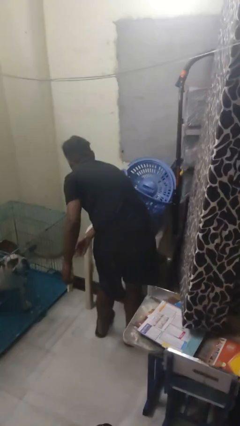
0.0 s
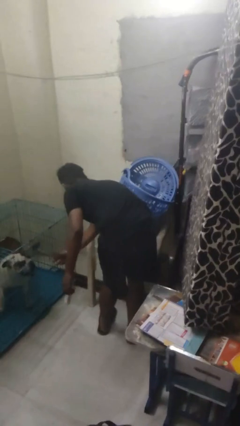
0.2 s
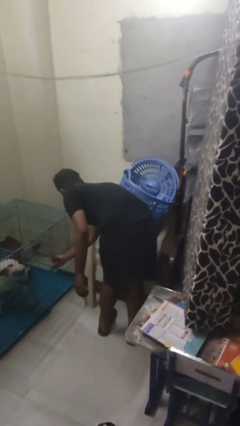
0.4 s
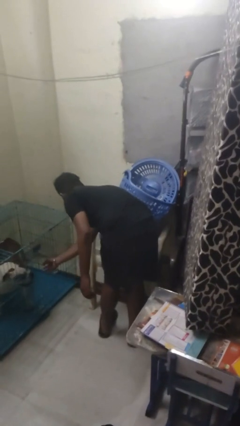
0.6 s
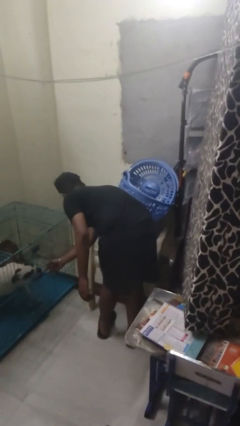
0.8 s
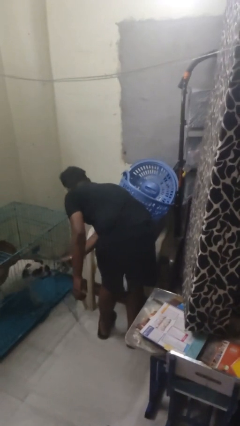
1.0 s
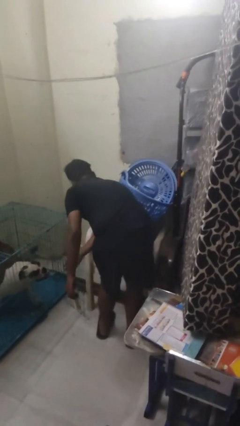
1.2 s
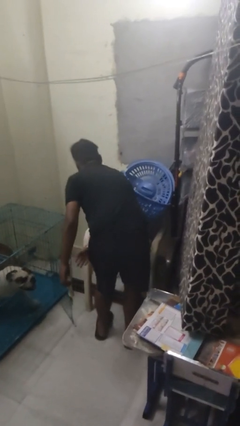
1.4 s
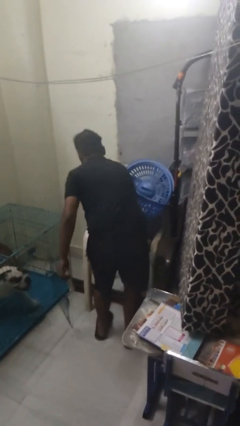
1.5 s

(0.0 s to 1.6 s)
person uncrates dog

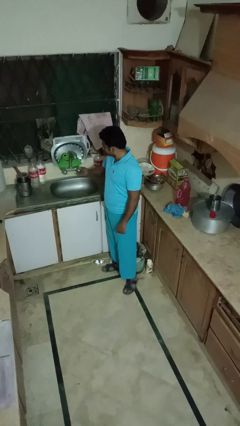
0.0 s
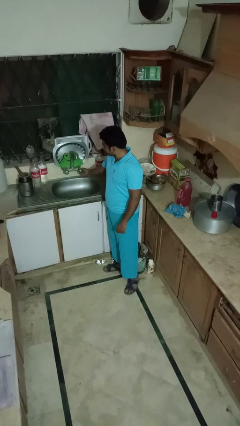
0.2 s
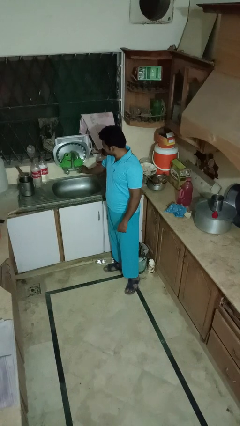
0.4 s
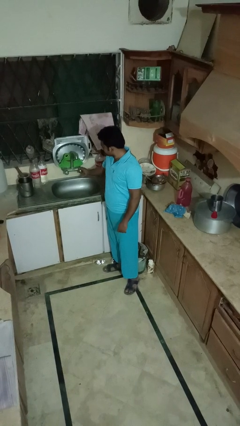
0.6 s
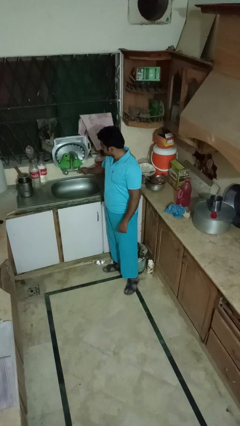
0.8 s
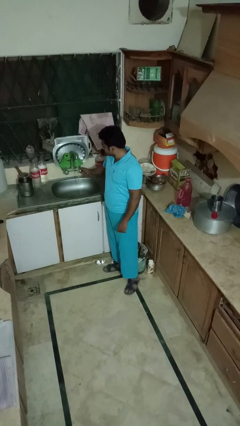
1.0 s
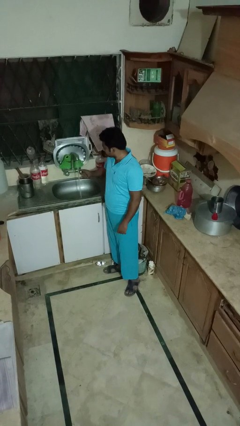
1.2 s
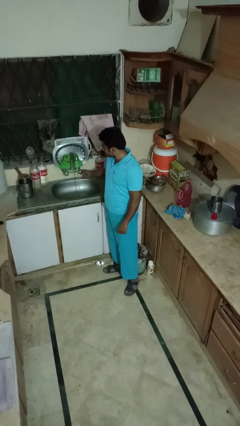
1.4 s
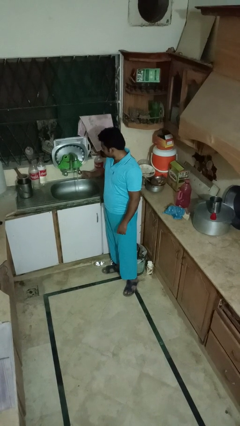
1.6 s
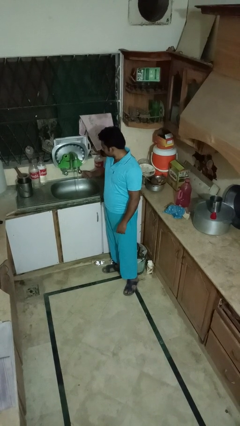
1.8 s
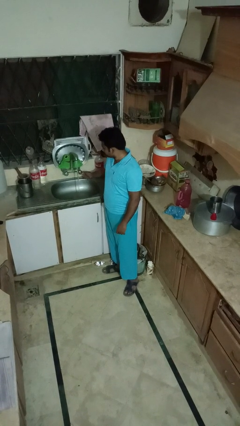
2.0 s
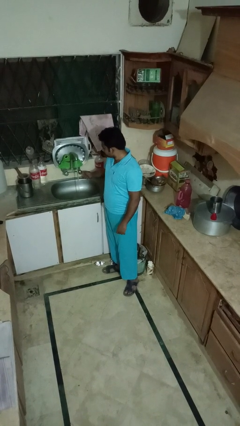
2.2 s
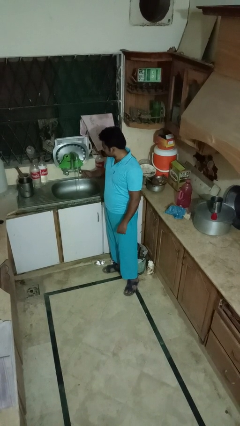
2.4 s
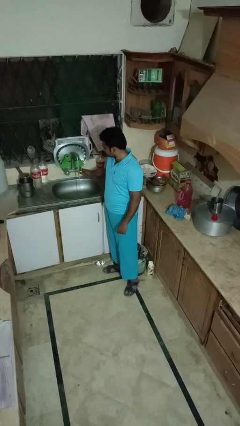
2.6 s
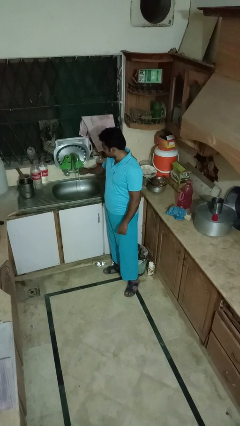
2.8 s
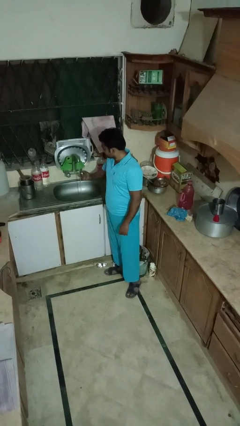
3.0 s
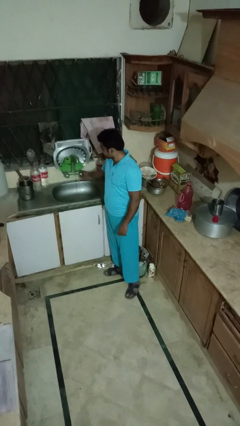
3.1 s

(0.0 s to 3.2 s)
person turns on faucet

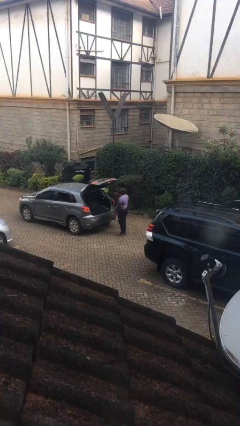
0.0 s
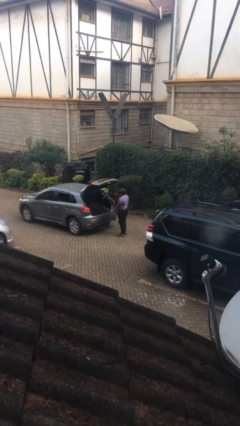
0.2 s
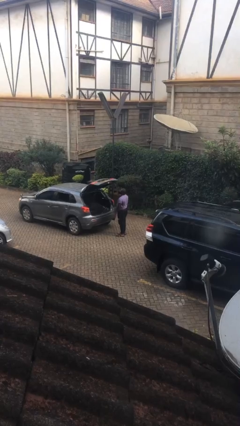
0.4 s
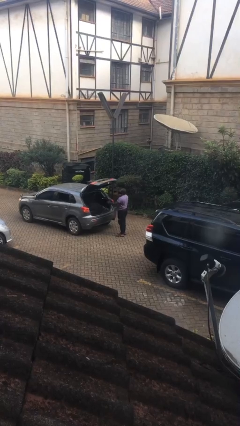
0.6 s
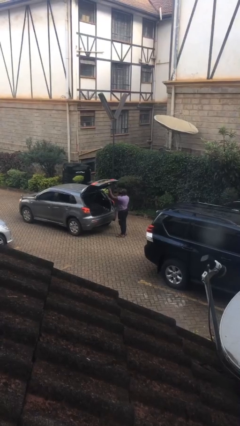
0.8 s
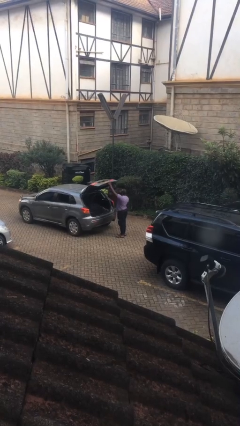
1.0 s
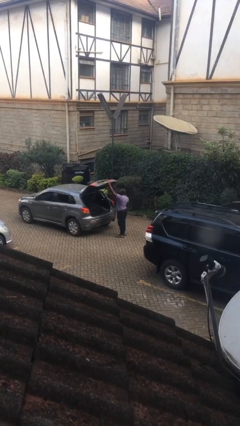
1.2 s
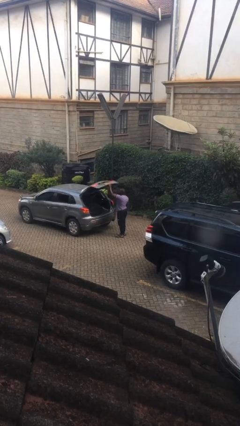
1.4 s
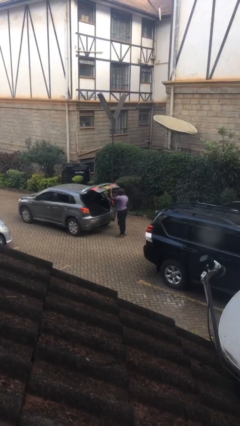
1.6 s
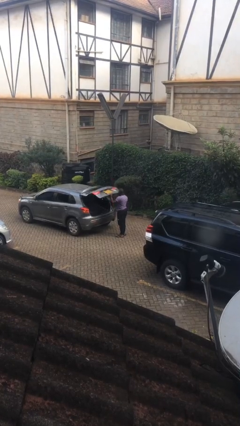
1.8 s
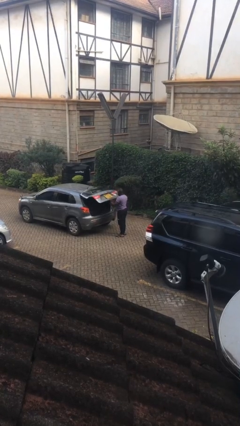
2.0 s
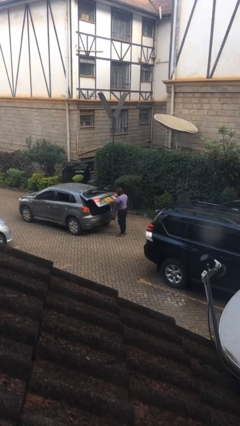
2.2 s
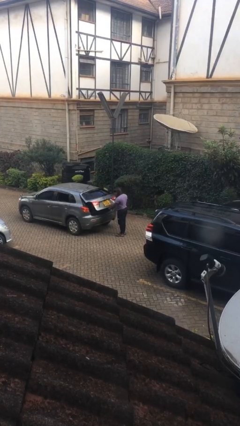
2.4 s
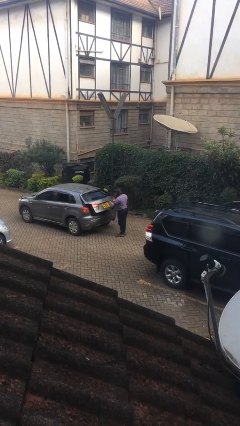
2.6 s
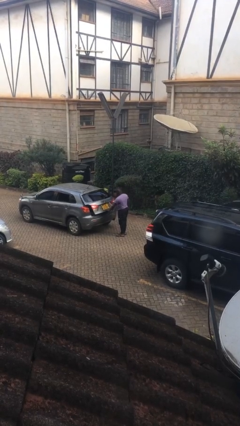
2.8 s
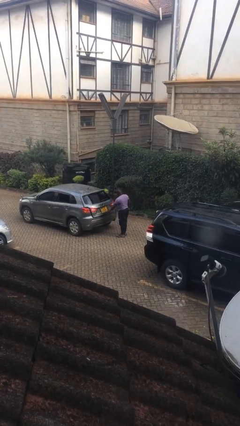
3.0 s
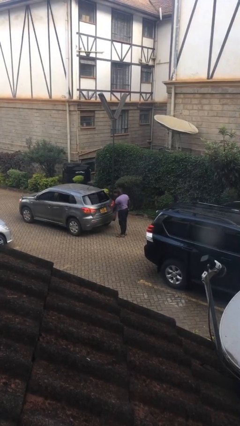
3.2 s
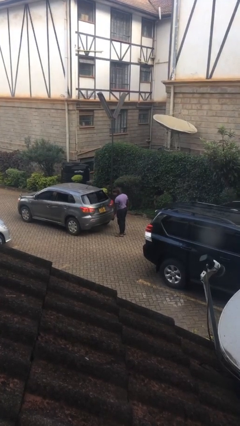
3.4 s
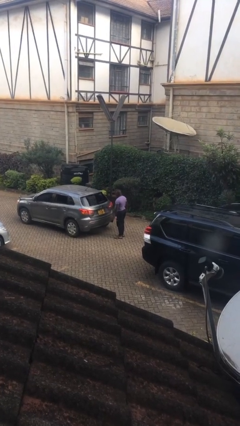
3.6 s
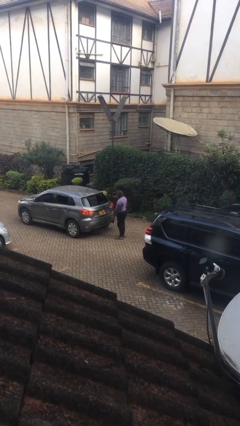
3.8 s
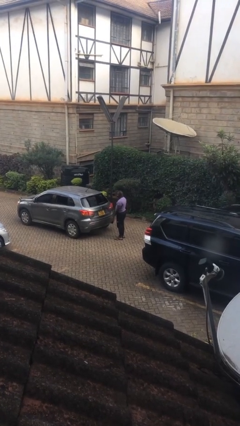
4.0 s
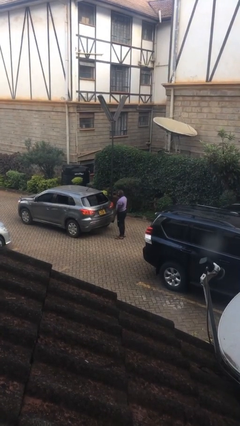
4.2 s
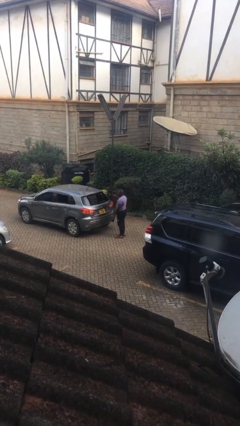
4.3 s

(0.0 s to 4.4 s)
person closes car trunk

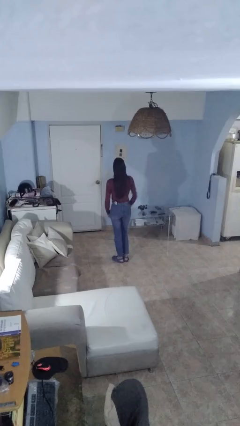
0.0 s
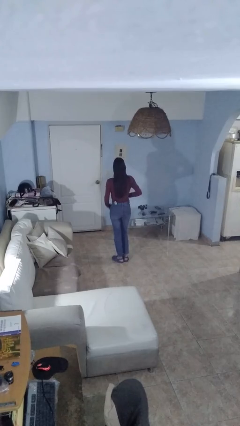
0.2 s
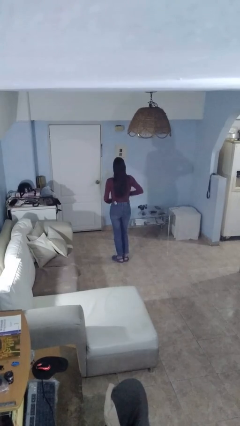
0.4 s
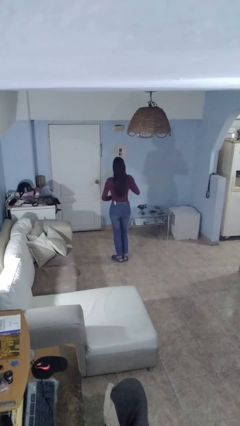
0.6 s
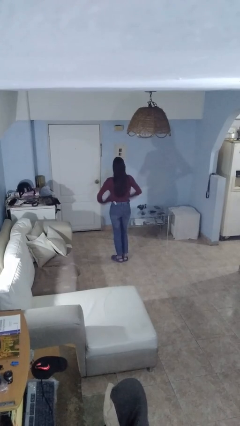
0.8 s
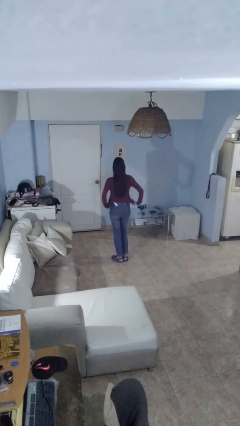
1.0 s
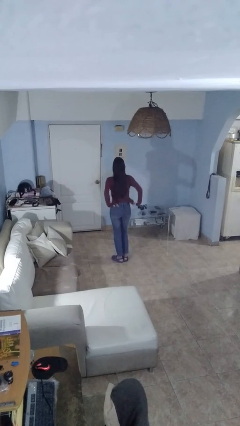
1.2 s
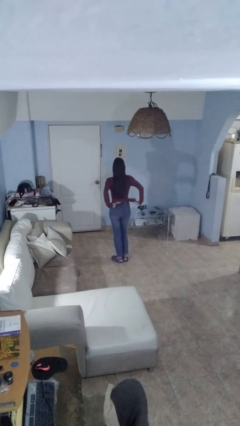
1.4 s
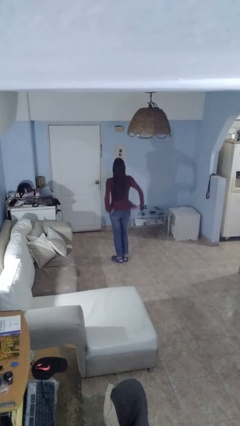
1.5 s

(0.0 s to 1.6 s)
person untucks shirt

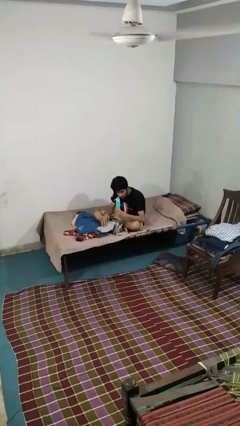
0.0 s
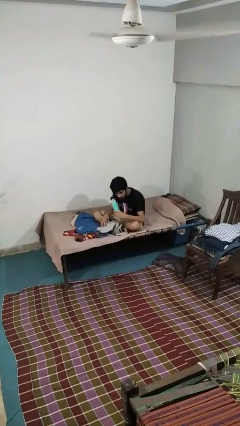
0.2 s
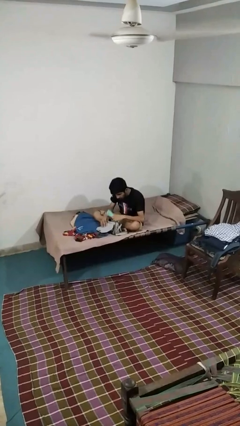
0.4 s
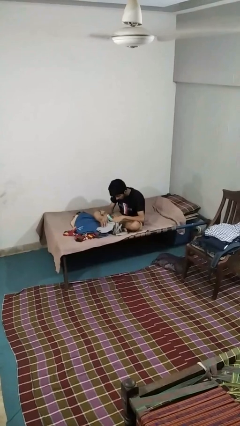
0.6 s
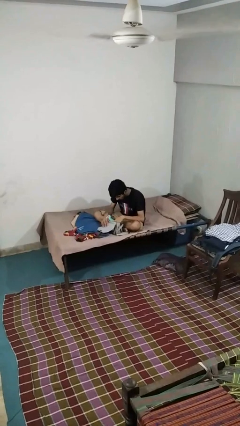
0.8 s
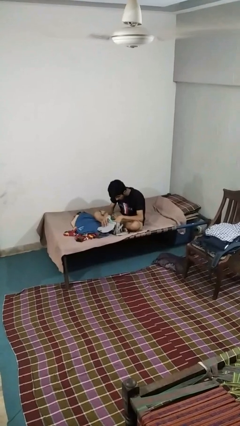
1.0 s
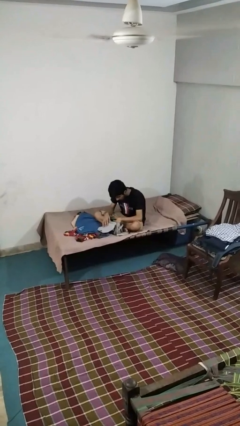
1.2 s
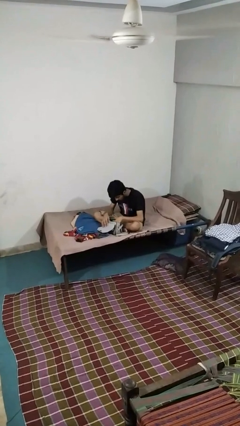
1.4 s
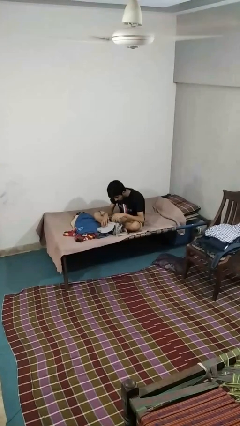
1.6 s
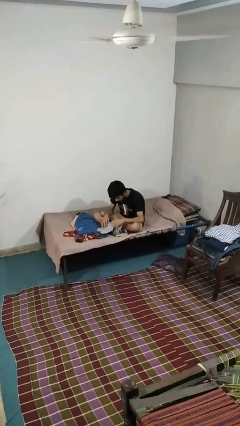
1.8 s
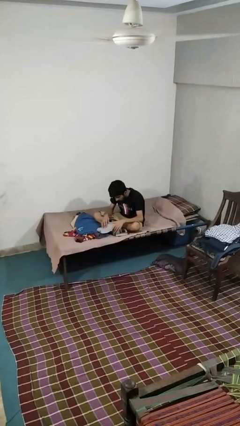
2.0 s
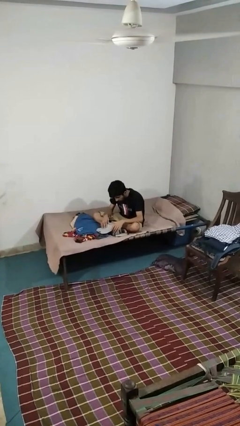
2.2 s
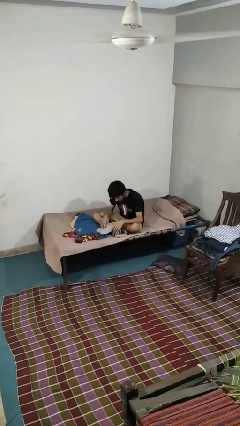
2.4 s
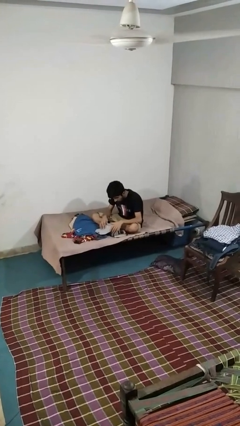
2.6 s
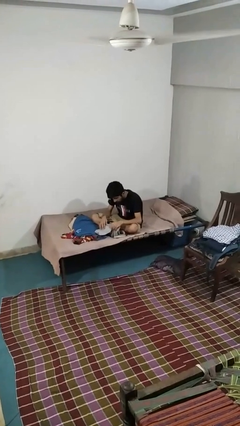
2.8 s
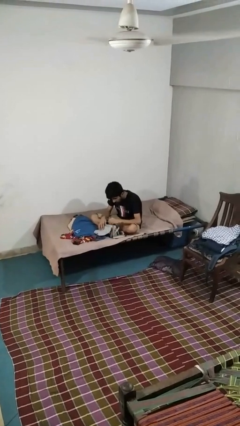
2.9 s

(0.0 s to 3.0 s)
person puts object into purse

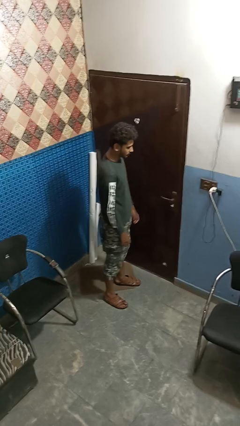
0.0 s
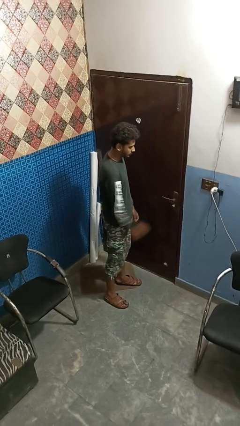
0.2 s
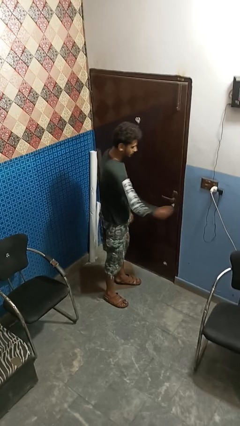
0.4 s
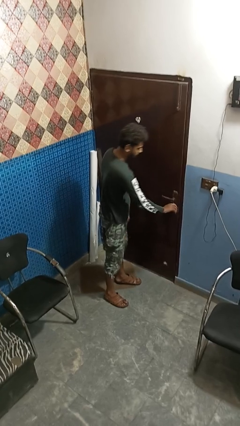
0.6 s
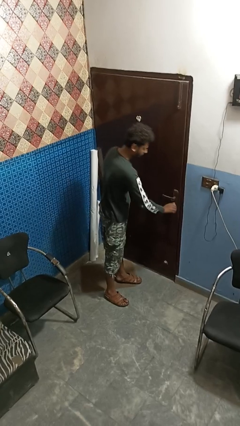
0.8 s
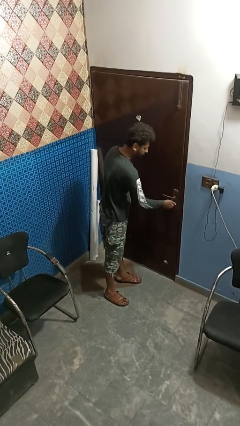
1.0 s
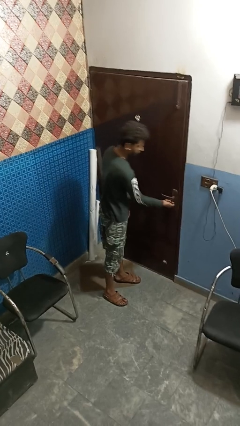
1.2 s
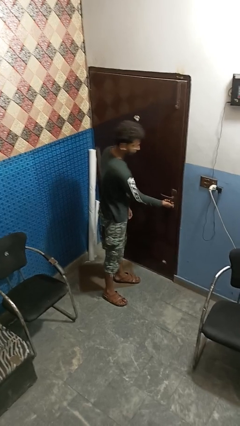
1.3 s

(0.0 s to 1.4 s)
person locks door with keys

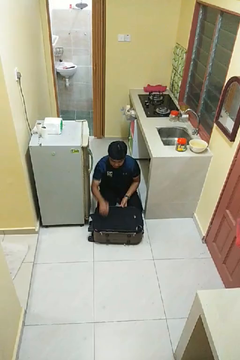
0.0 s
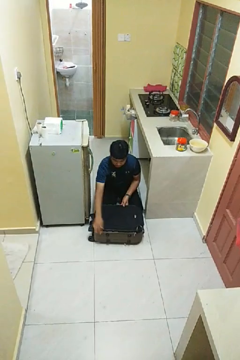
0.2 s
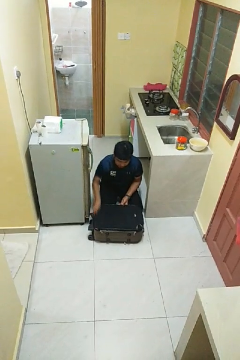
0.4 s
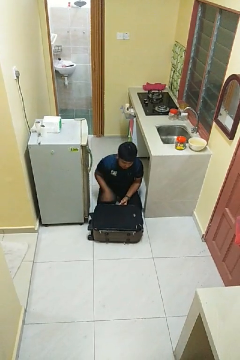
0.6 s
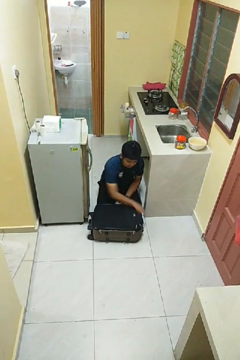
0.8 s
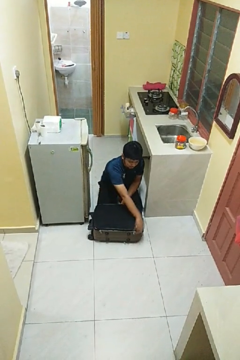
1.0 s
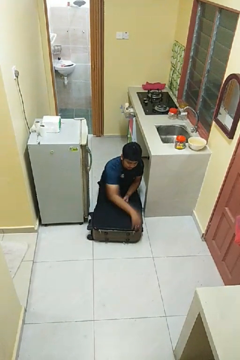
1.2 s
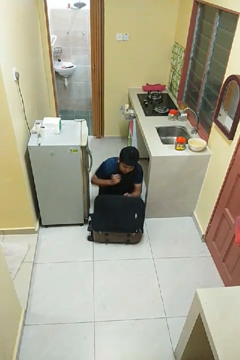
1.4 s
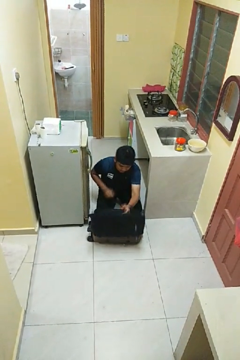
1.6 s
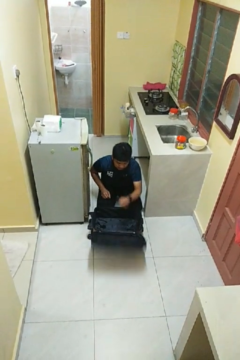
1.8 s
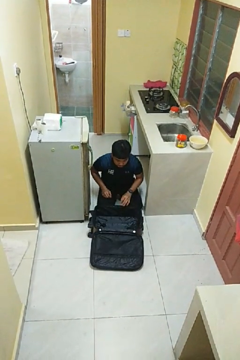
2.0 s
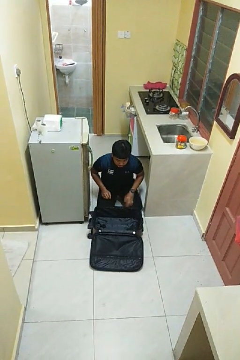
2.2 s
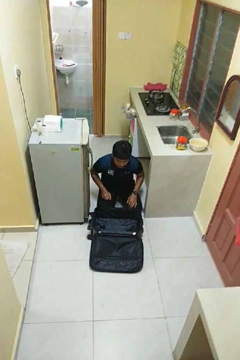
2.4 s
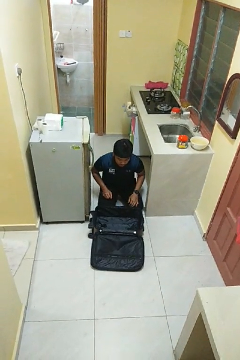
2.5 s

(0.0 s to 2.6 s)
person opens suitcase
